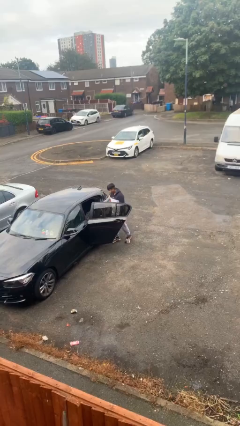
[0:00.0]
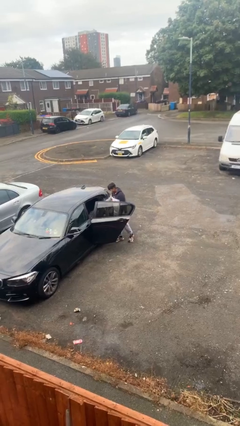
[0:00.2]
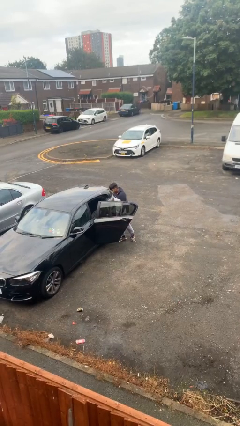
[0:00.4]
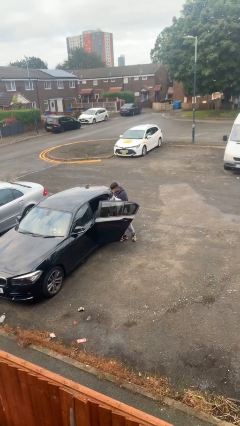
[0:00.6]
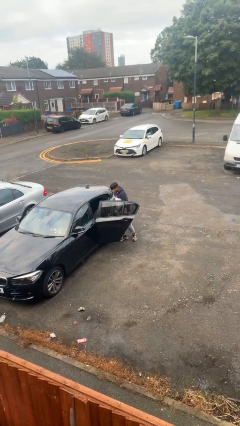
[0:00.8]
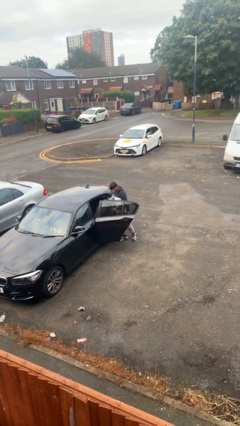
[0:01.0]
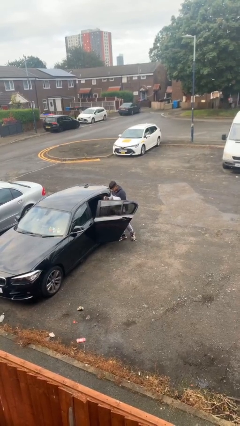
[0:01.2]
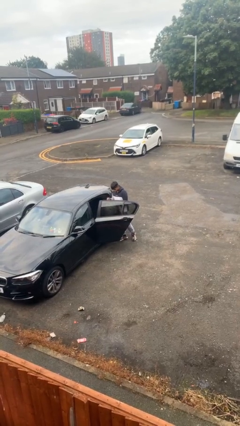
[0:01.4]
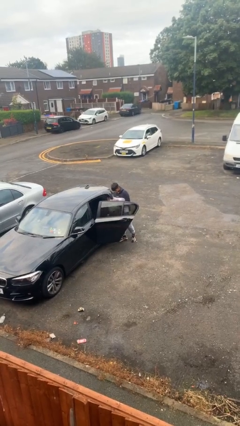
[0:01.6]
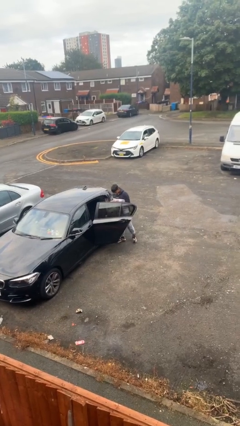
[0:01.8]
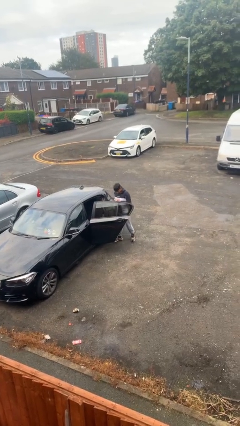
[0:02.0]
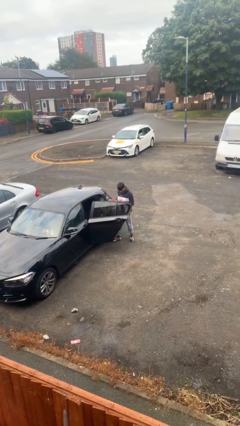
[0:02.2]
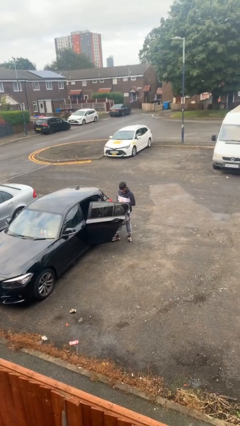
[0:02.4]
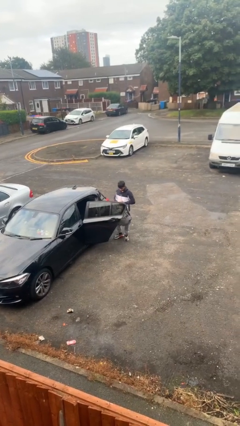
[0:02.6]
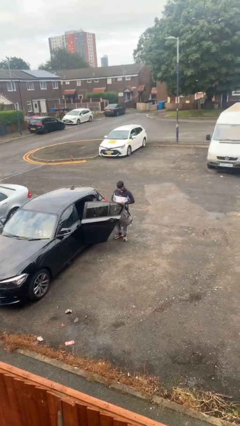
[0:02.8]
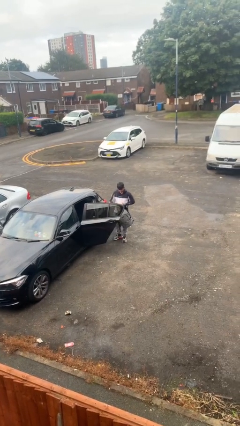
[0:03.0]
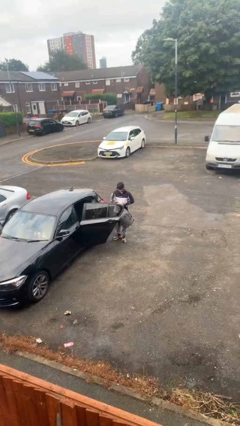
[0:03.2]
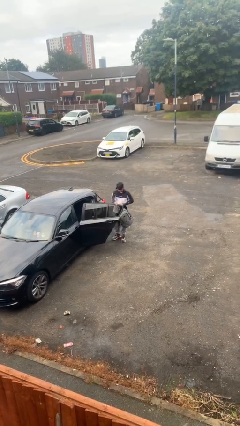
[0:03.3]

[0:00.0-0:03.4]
person unloads car

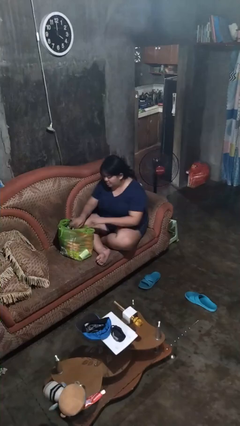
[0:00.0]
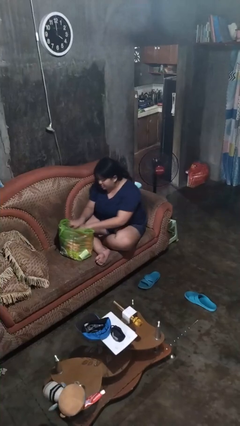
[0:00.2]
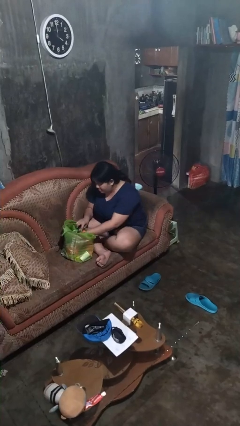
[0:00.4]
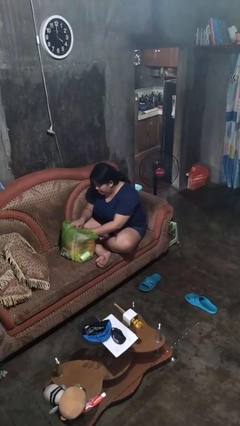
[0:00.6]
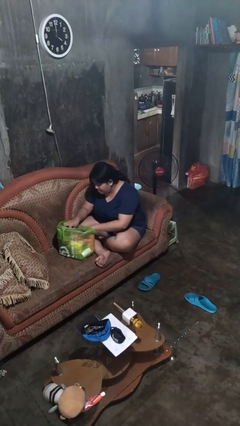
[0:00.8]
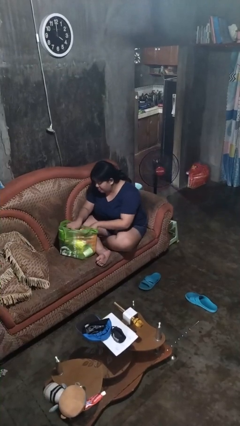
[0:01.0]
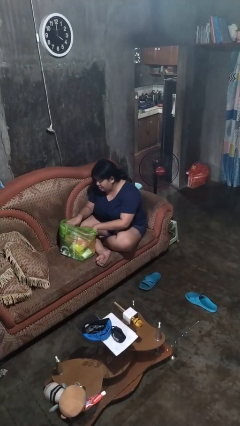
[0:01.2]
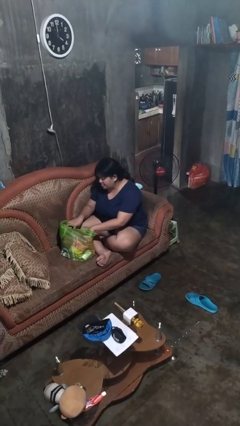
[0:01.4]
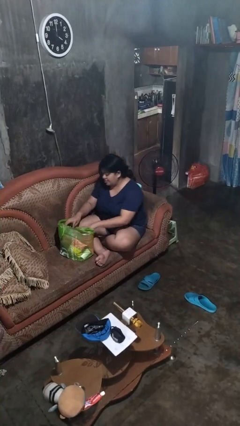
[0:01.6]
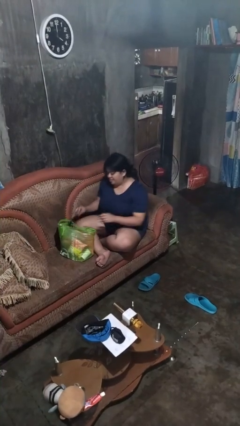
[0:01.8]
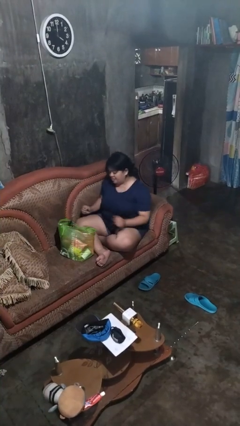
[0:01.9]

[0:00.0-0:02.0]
person searches in bag

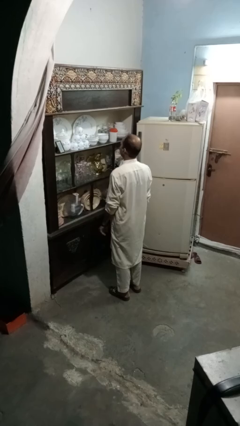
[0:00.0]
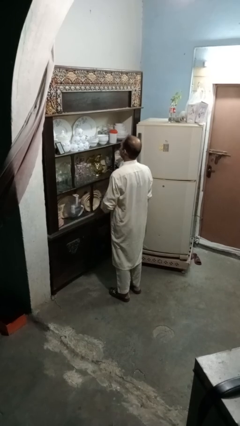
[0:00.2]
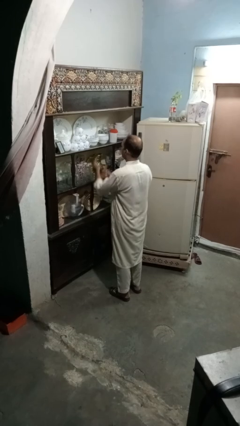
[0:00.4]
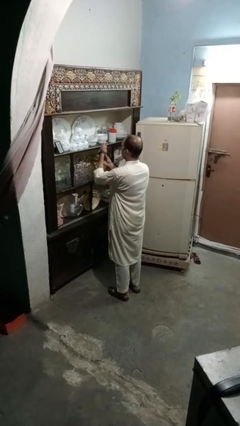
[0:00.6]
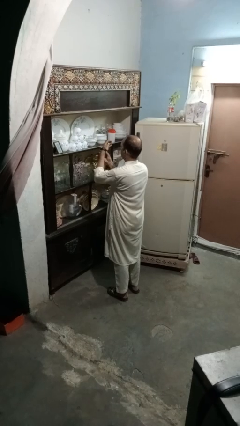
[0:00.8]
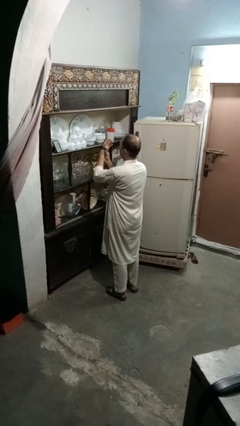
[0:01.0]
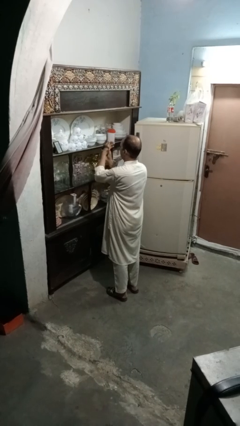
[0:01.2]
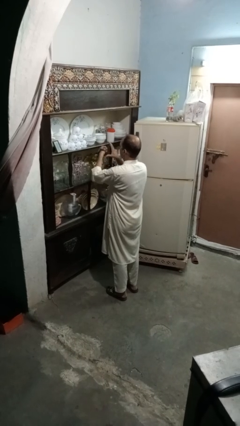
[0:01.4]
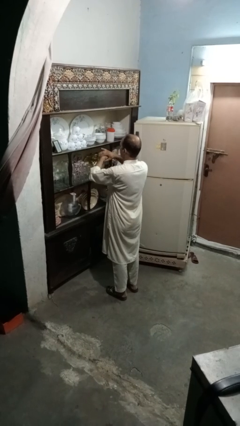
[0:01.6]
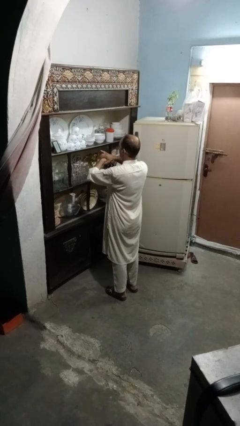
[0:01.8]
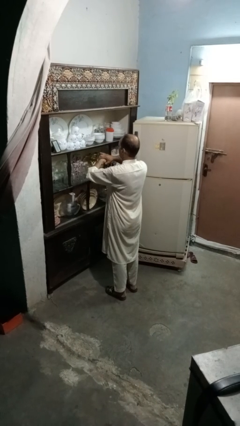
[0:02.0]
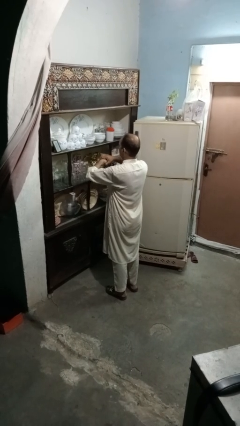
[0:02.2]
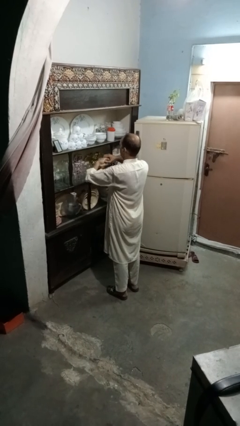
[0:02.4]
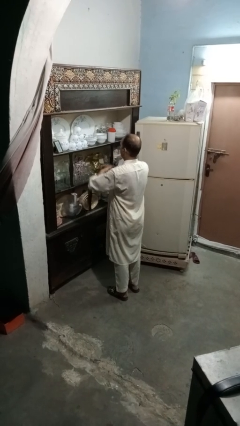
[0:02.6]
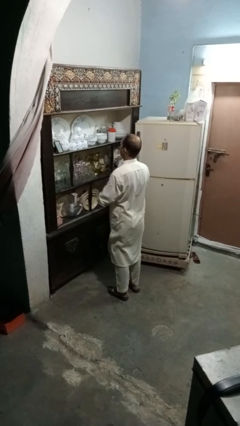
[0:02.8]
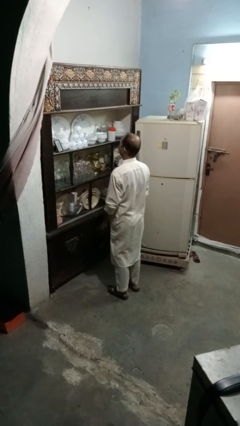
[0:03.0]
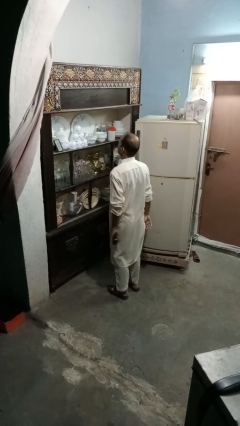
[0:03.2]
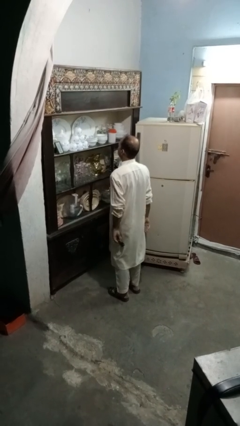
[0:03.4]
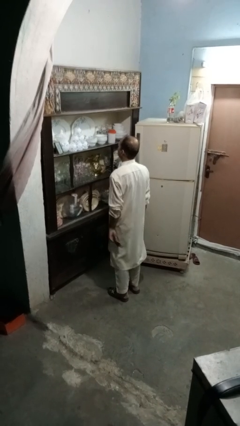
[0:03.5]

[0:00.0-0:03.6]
person takes off wristwatch

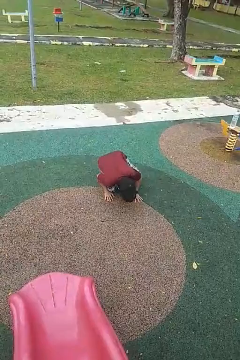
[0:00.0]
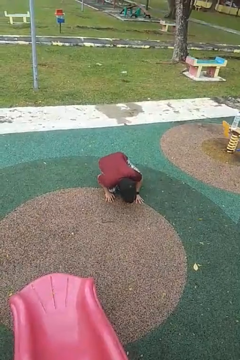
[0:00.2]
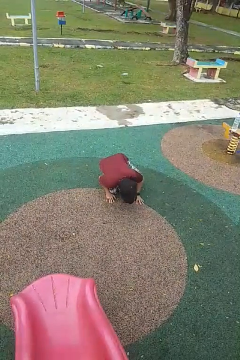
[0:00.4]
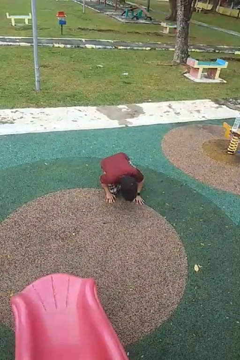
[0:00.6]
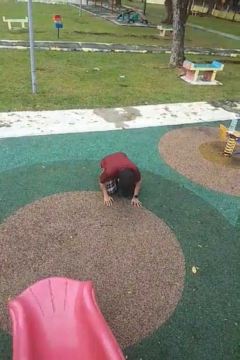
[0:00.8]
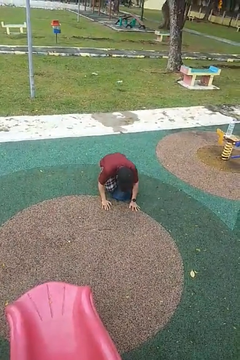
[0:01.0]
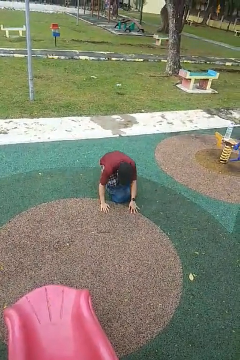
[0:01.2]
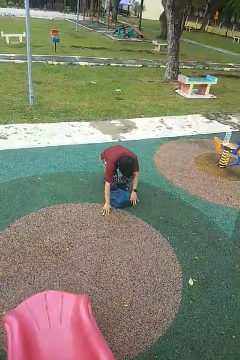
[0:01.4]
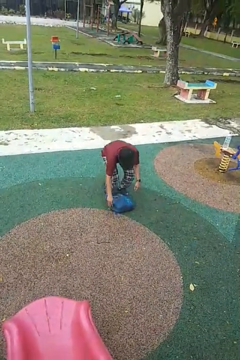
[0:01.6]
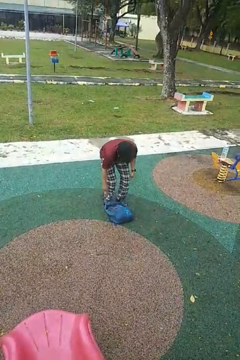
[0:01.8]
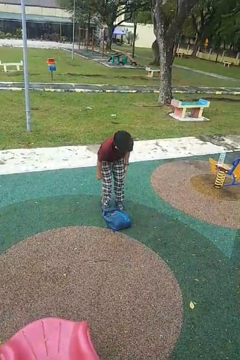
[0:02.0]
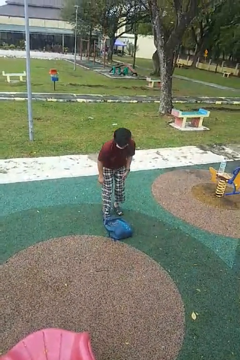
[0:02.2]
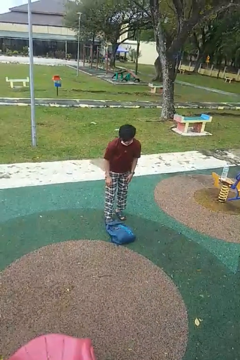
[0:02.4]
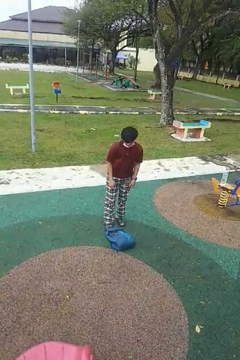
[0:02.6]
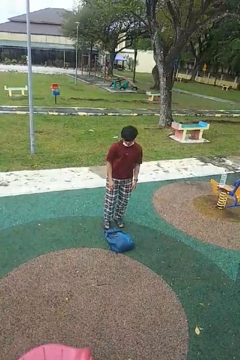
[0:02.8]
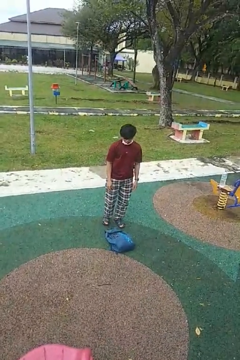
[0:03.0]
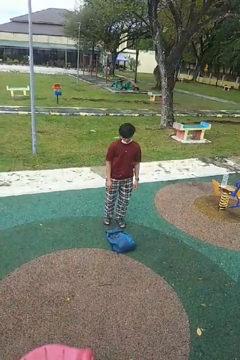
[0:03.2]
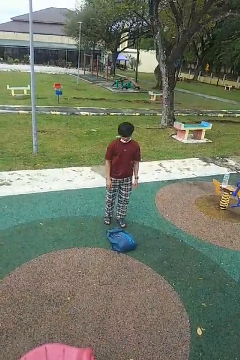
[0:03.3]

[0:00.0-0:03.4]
person stands up from floor

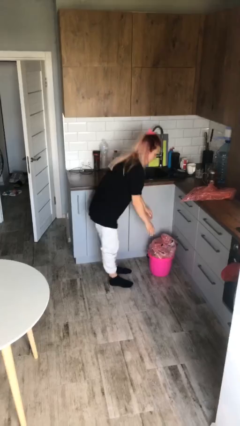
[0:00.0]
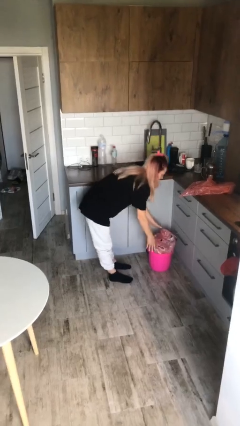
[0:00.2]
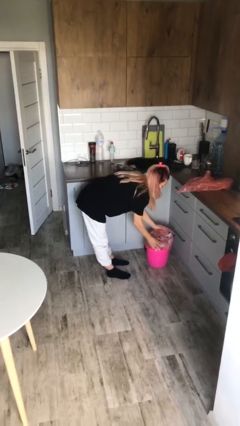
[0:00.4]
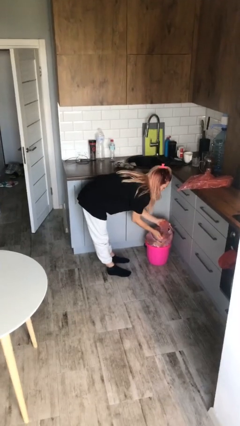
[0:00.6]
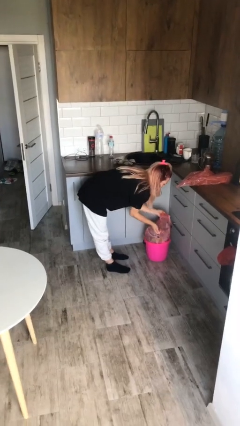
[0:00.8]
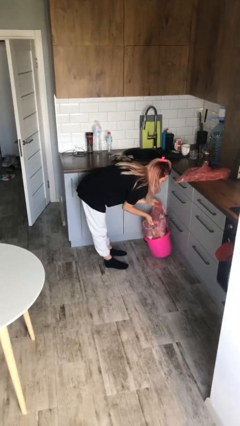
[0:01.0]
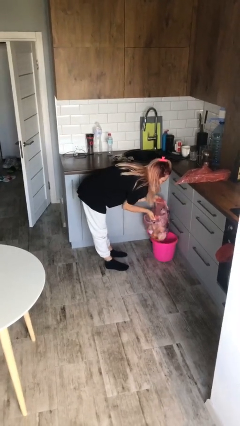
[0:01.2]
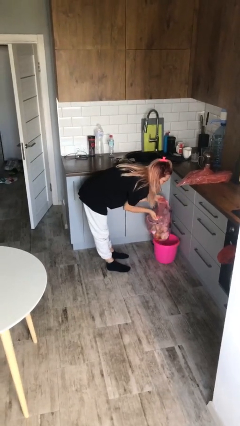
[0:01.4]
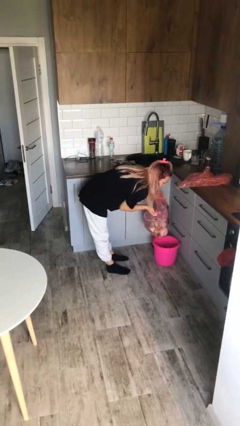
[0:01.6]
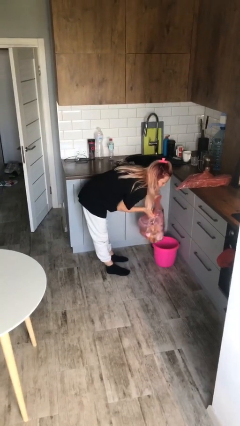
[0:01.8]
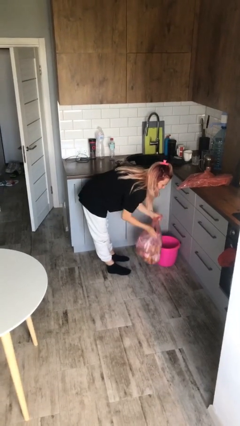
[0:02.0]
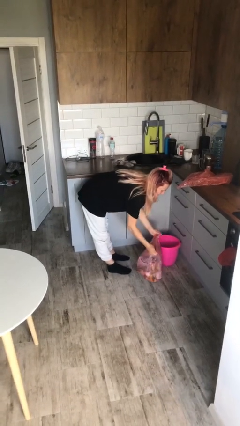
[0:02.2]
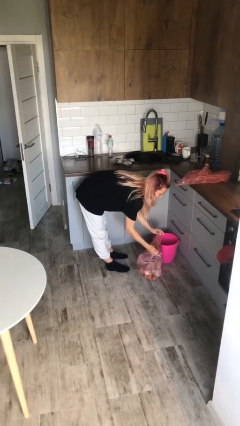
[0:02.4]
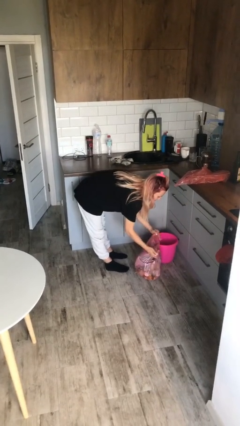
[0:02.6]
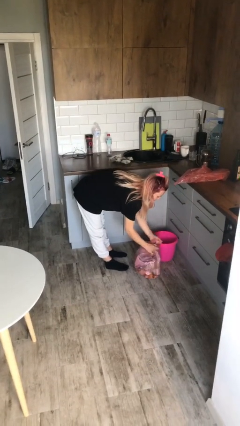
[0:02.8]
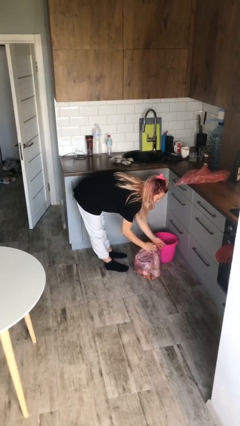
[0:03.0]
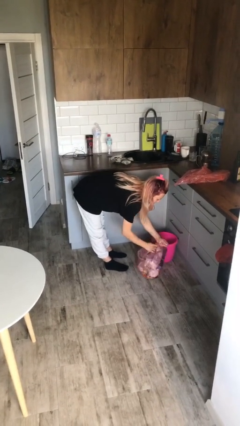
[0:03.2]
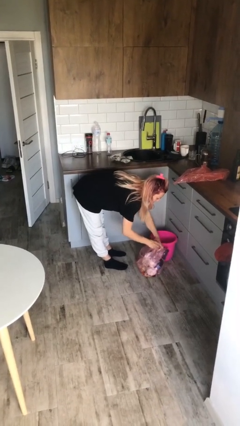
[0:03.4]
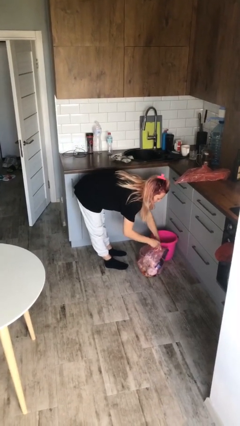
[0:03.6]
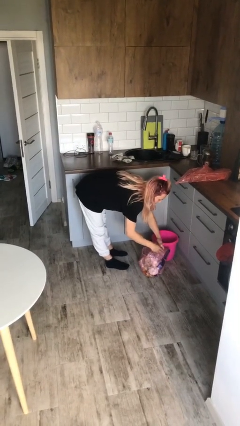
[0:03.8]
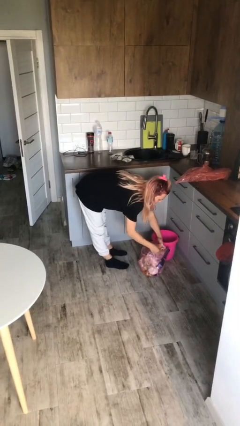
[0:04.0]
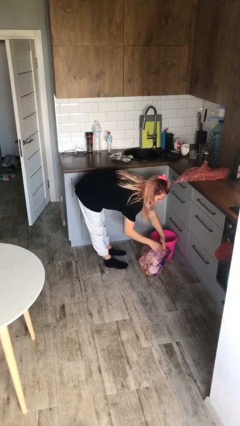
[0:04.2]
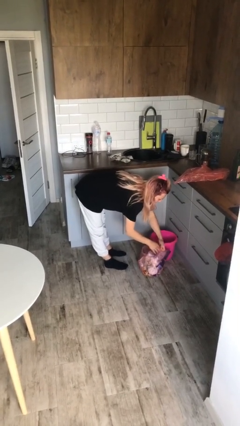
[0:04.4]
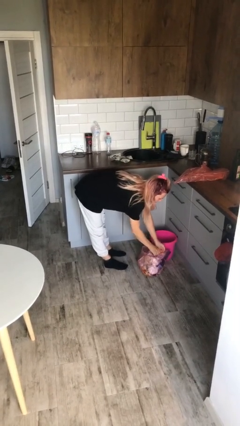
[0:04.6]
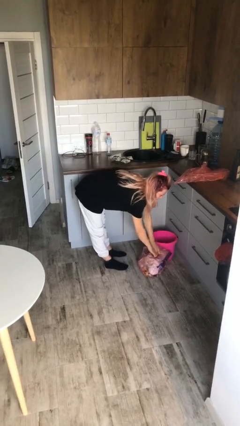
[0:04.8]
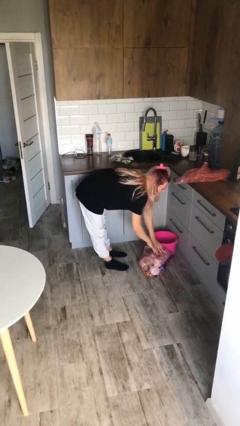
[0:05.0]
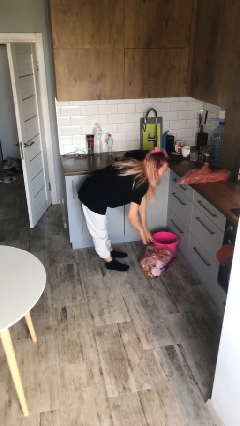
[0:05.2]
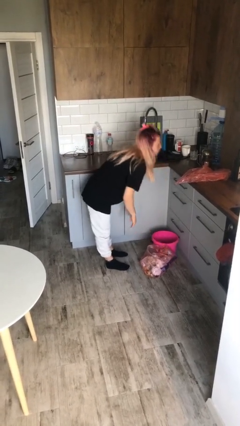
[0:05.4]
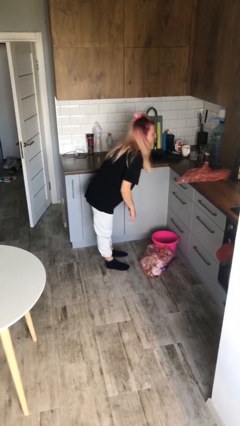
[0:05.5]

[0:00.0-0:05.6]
person removes trashbag from trashcan
